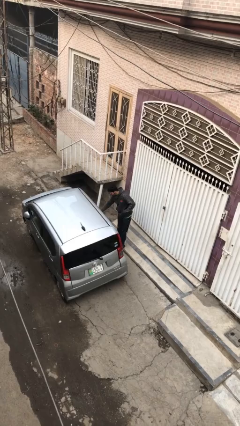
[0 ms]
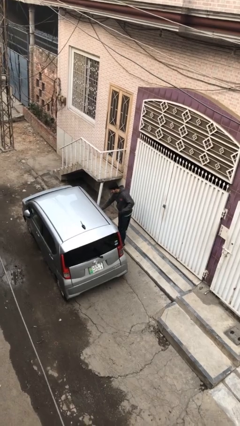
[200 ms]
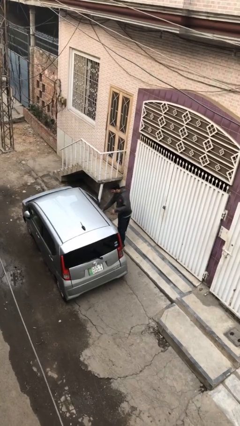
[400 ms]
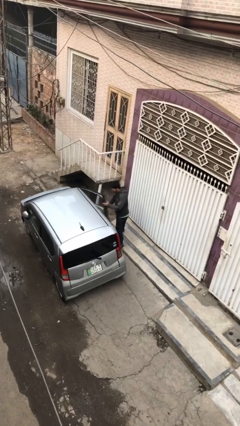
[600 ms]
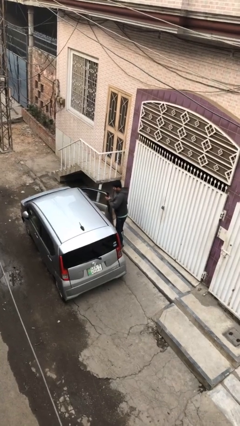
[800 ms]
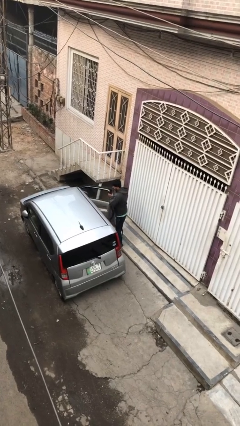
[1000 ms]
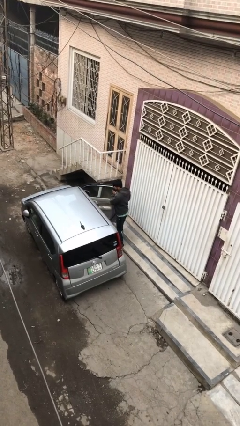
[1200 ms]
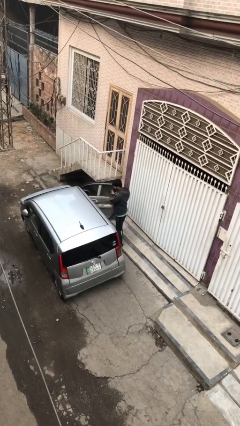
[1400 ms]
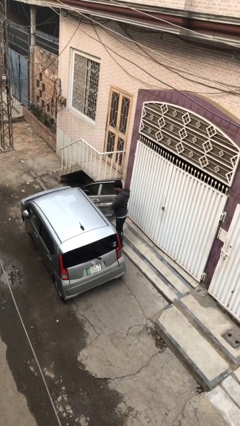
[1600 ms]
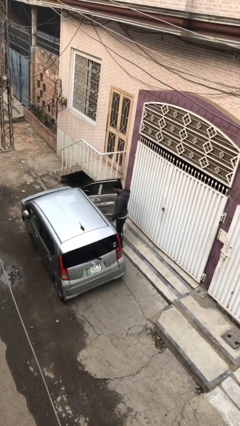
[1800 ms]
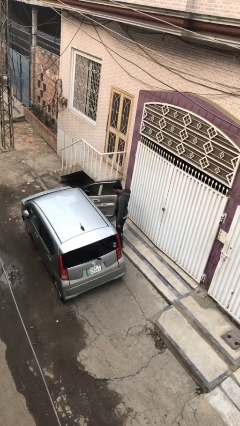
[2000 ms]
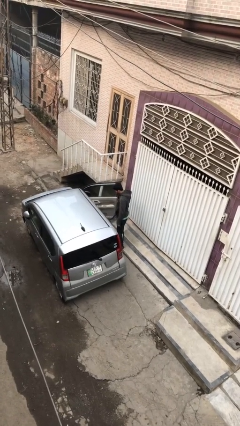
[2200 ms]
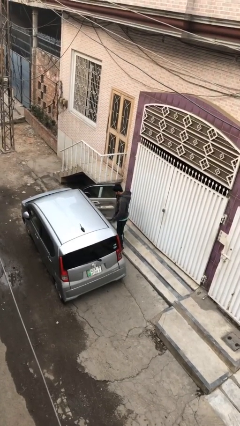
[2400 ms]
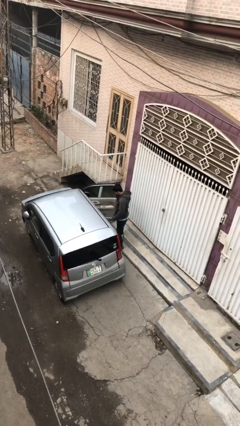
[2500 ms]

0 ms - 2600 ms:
person opens car door

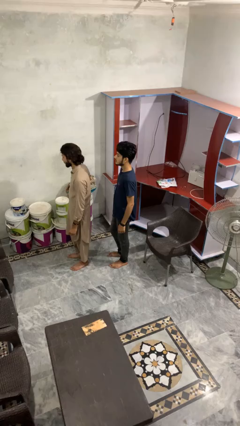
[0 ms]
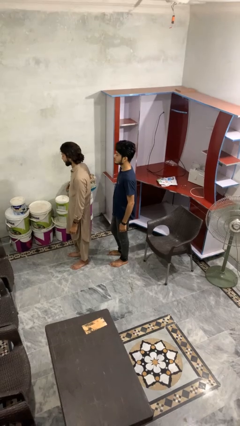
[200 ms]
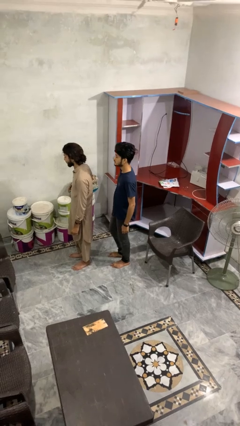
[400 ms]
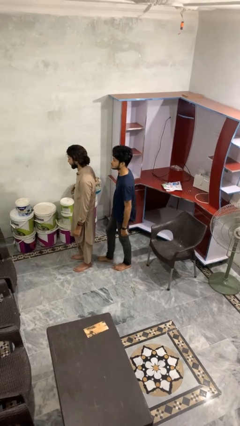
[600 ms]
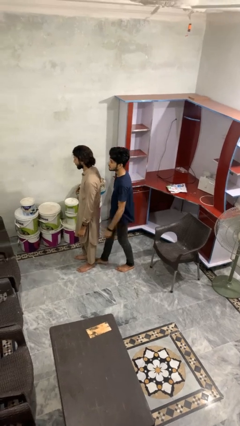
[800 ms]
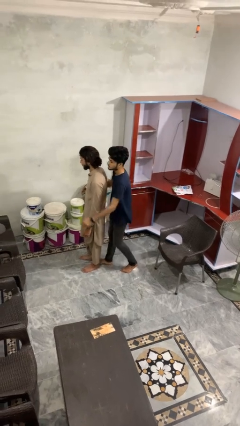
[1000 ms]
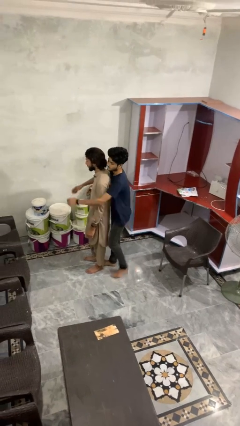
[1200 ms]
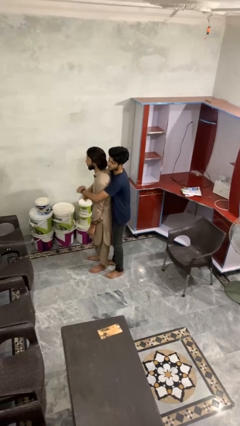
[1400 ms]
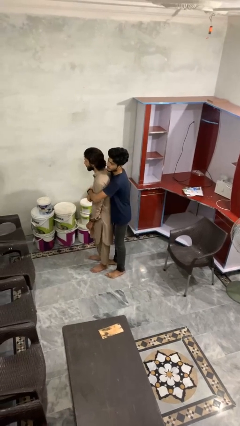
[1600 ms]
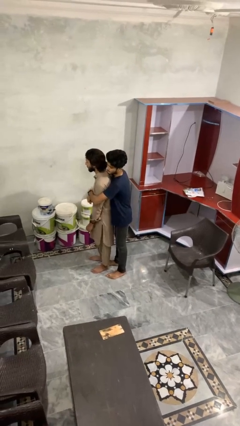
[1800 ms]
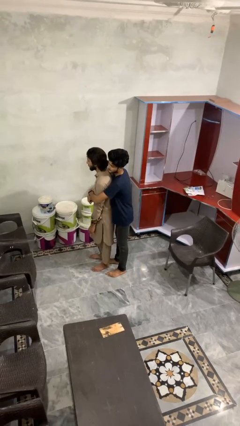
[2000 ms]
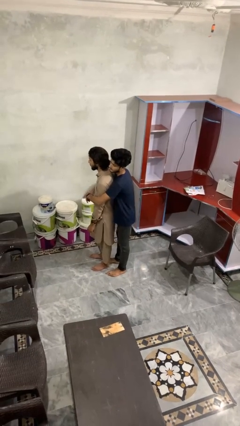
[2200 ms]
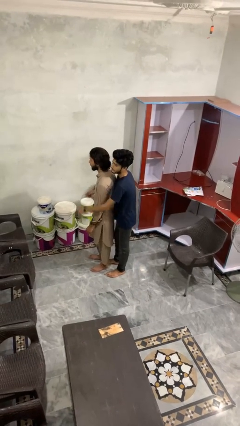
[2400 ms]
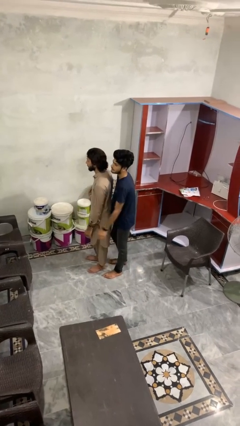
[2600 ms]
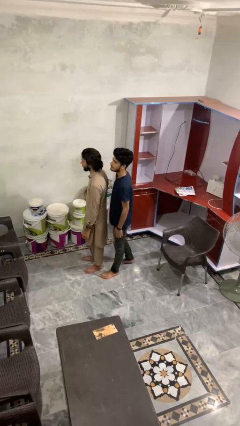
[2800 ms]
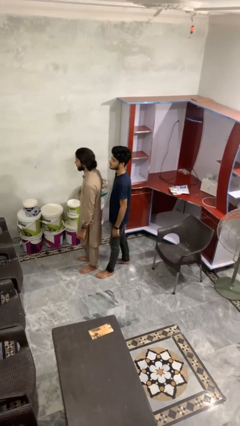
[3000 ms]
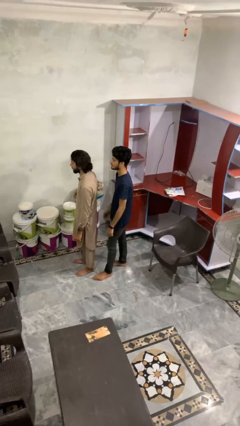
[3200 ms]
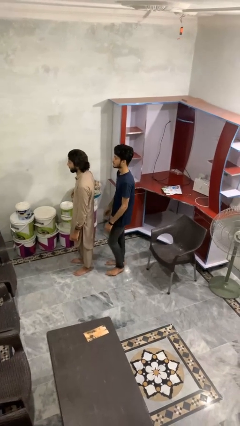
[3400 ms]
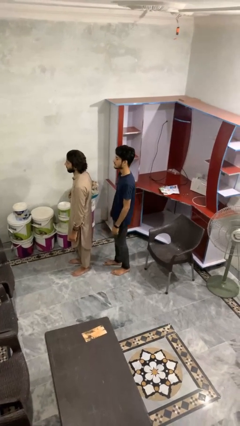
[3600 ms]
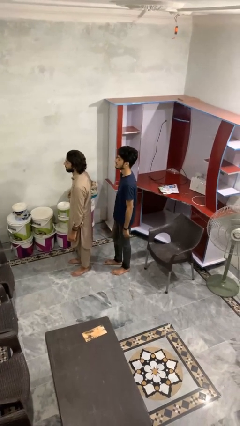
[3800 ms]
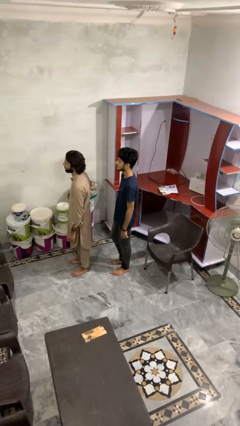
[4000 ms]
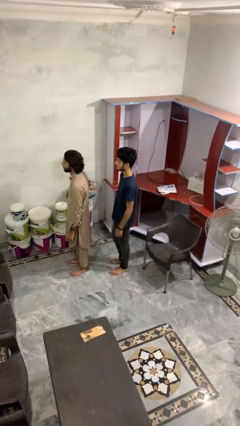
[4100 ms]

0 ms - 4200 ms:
person hugs person from behind

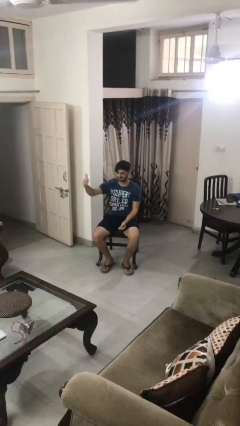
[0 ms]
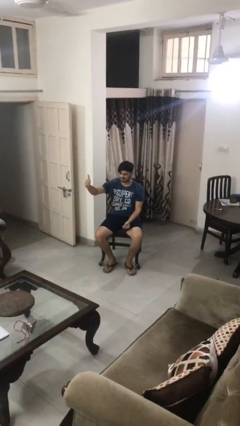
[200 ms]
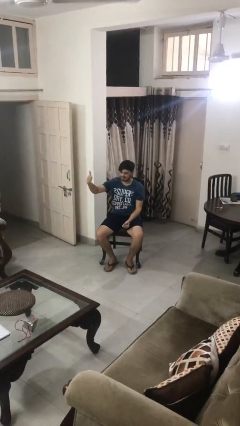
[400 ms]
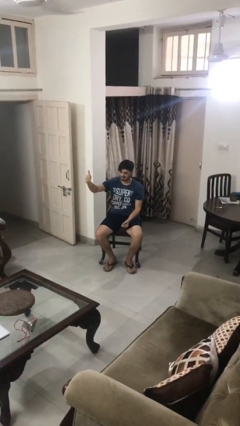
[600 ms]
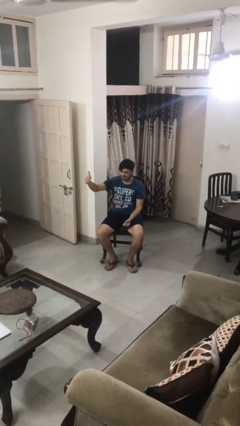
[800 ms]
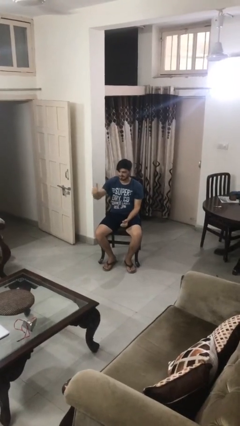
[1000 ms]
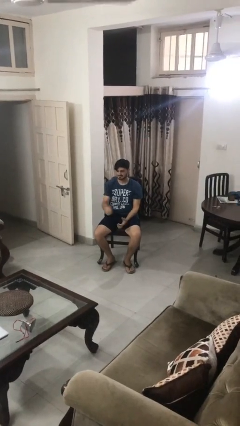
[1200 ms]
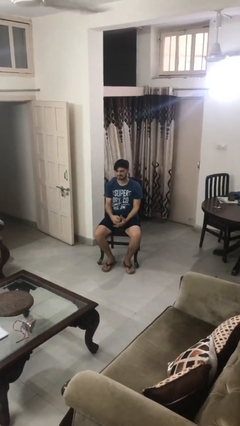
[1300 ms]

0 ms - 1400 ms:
person gestures thumbs up

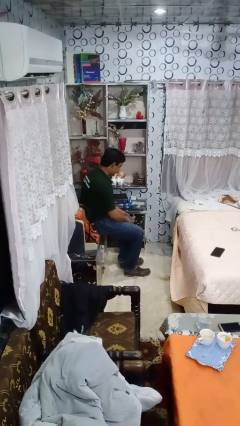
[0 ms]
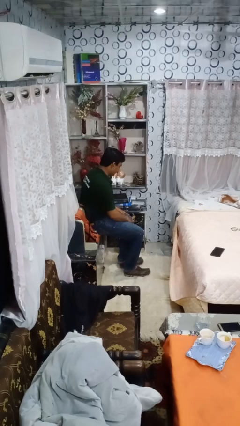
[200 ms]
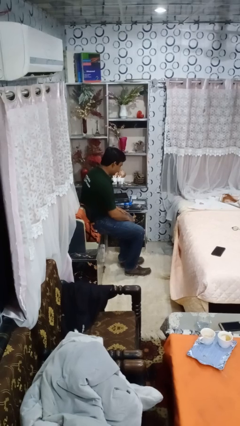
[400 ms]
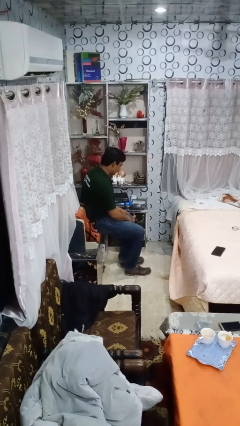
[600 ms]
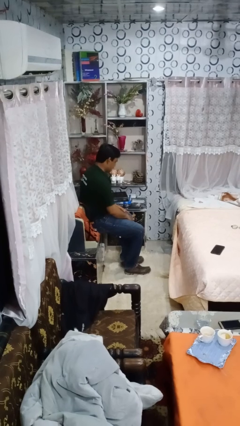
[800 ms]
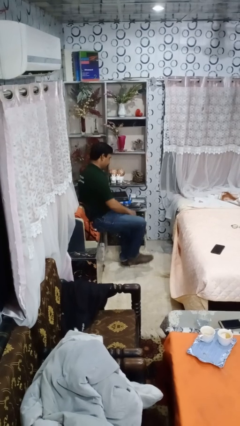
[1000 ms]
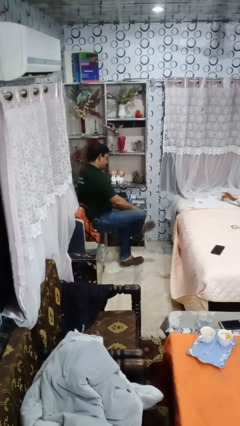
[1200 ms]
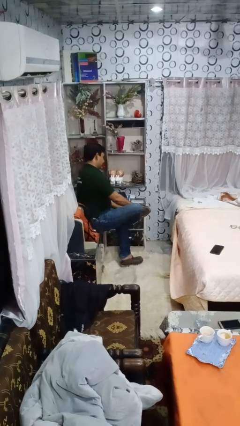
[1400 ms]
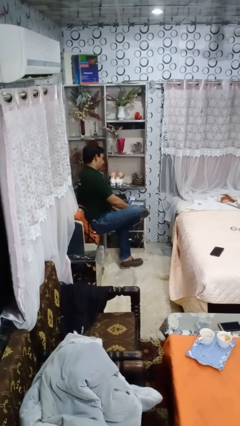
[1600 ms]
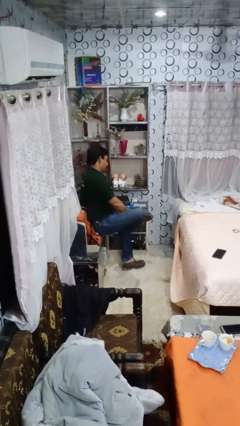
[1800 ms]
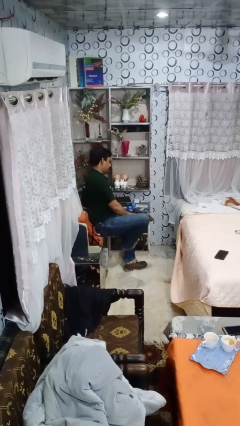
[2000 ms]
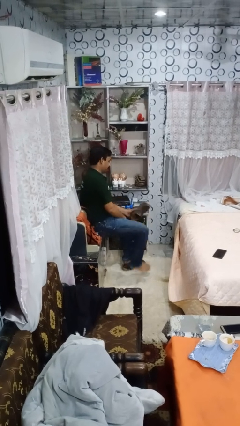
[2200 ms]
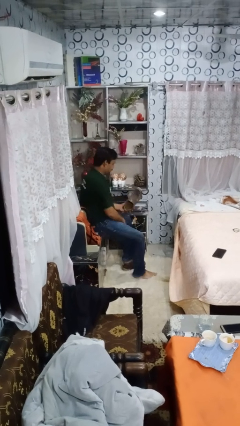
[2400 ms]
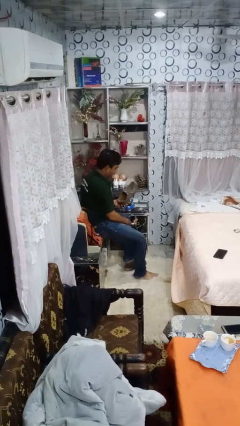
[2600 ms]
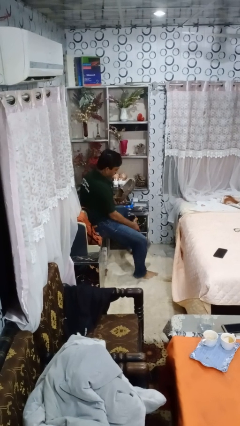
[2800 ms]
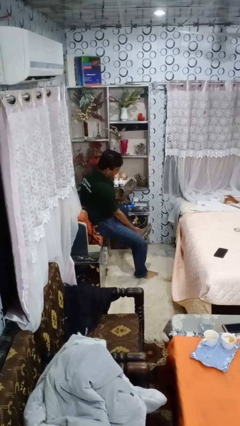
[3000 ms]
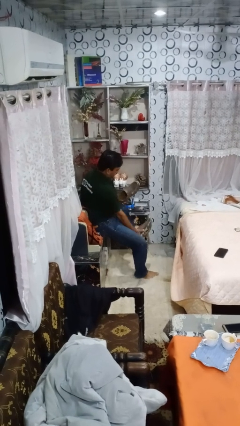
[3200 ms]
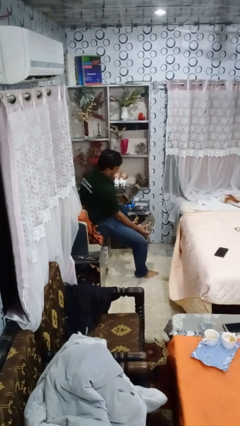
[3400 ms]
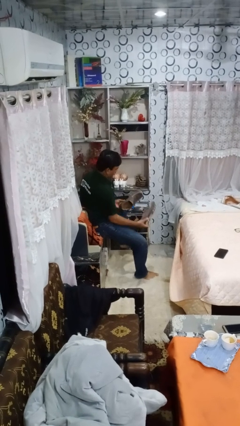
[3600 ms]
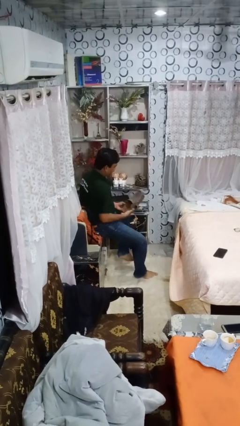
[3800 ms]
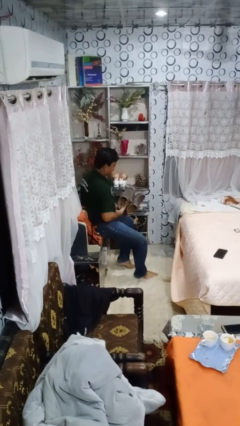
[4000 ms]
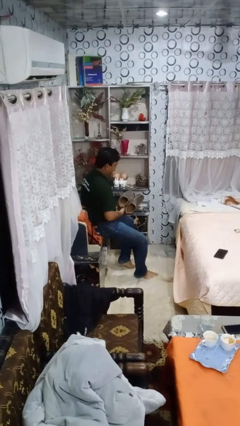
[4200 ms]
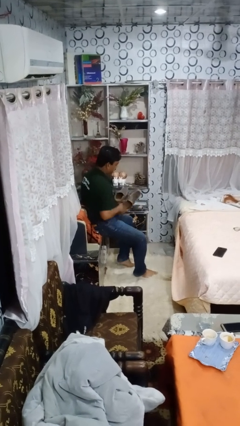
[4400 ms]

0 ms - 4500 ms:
person takes off shoes

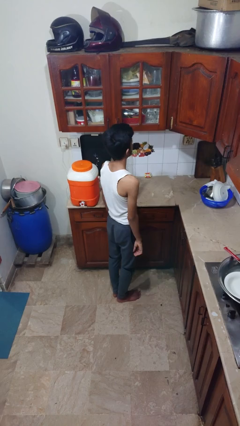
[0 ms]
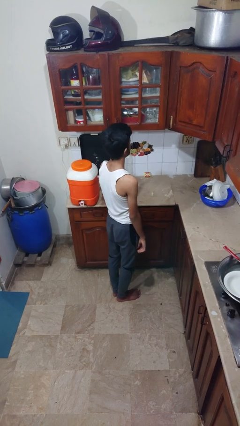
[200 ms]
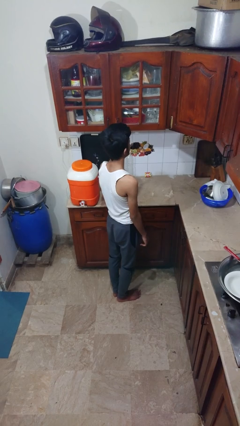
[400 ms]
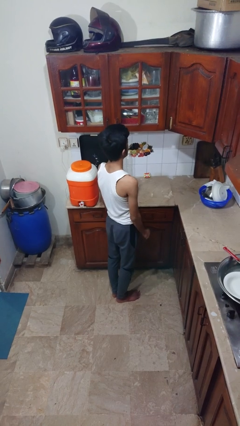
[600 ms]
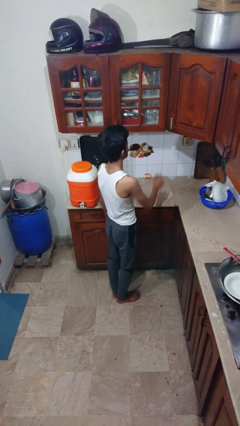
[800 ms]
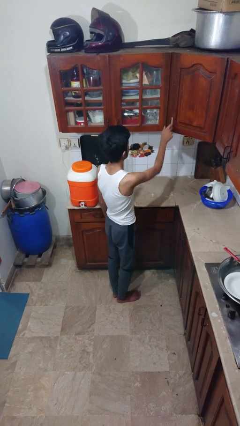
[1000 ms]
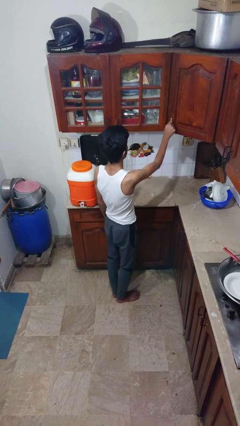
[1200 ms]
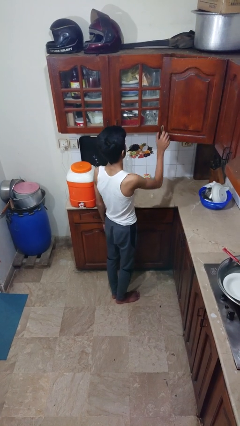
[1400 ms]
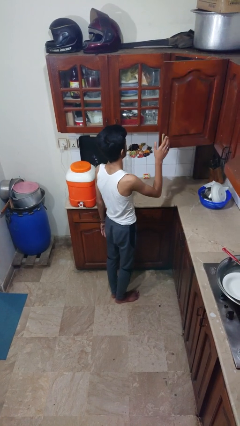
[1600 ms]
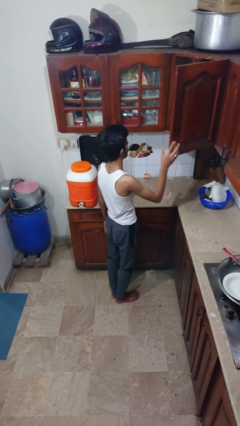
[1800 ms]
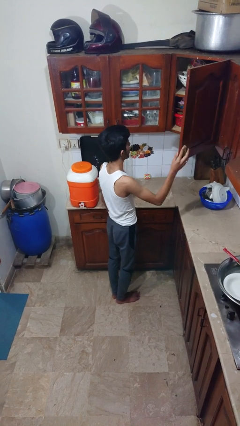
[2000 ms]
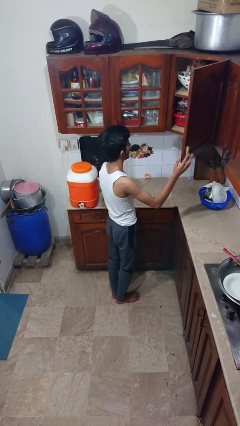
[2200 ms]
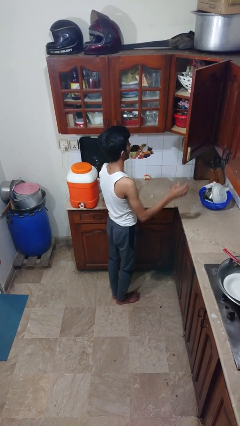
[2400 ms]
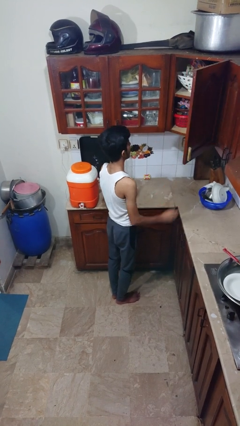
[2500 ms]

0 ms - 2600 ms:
person closes cabinet

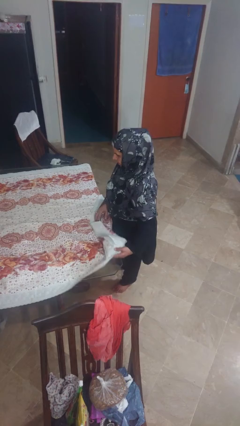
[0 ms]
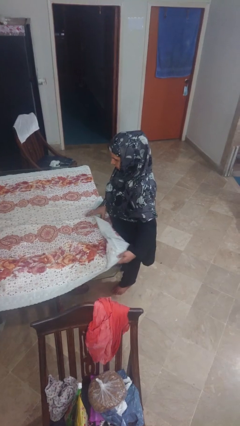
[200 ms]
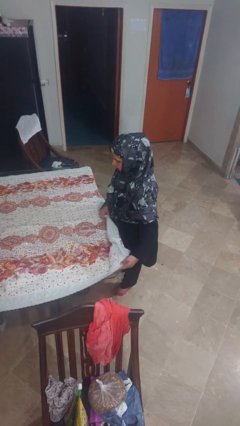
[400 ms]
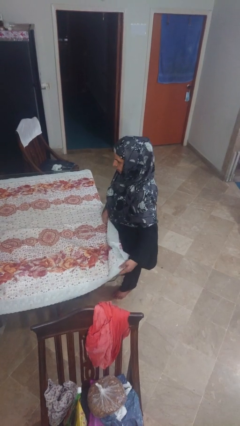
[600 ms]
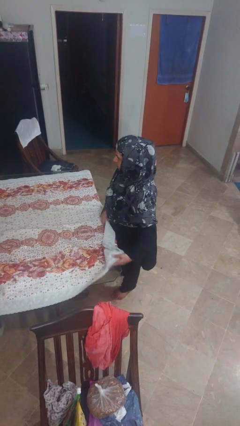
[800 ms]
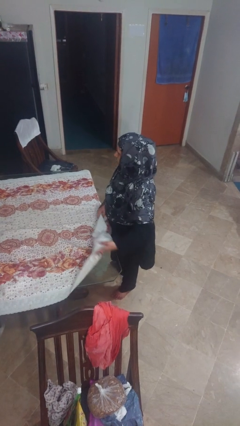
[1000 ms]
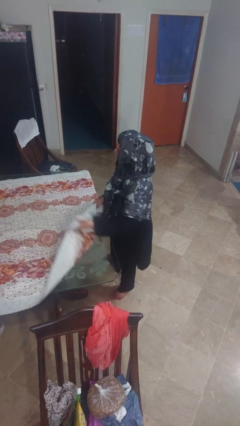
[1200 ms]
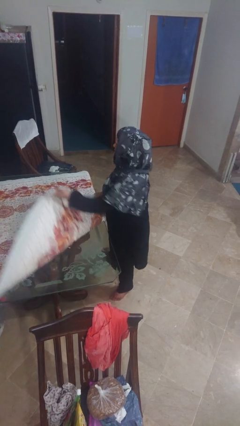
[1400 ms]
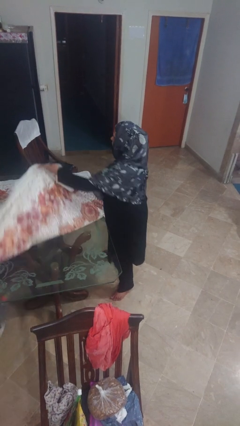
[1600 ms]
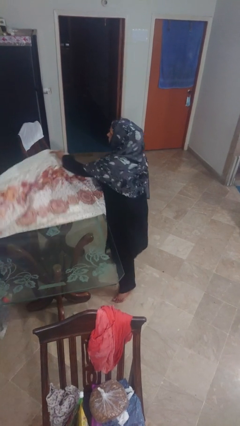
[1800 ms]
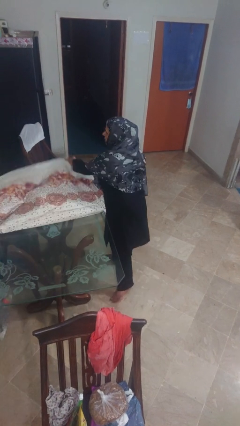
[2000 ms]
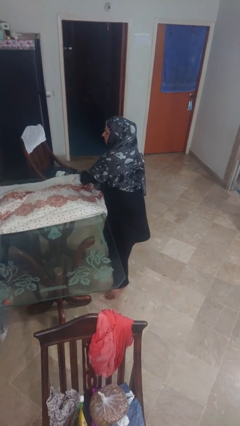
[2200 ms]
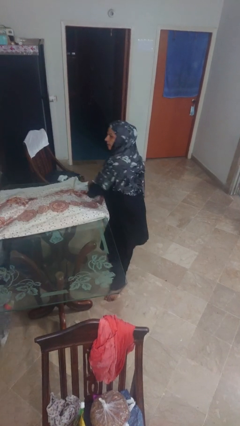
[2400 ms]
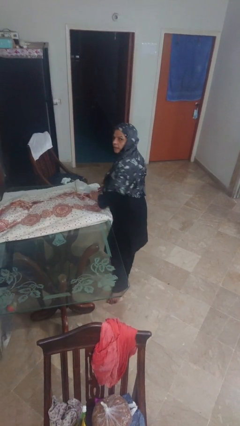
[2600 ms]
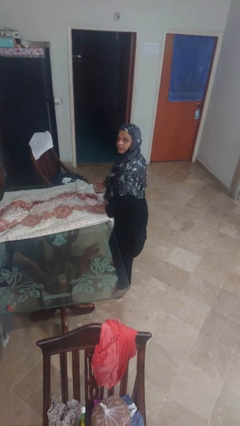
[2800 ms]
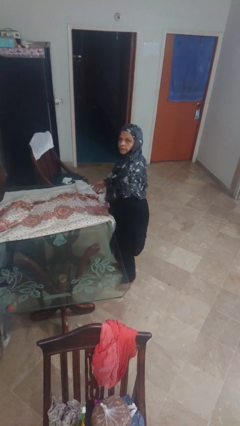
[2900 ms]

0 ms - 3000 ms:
person folds tablecloth
